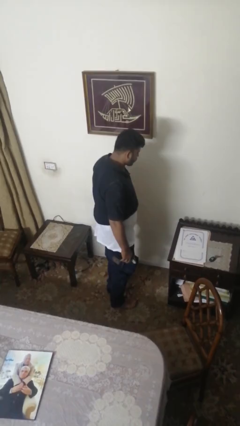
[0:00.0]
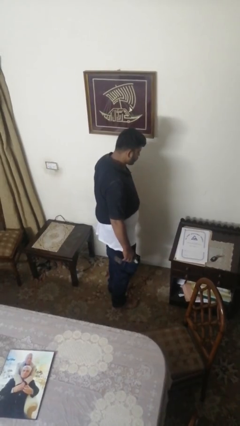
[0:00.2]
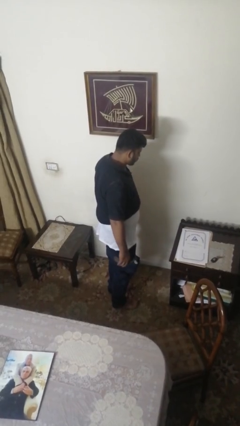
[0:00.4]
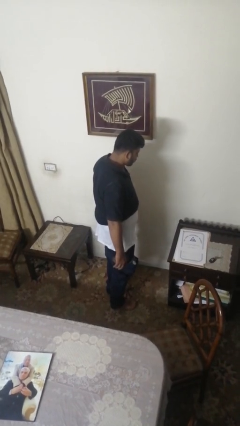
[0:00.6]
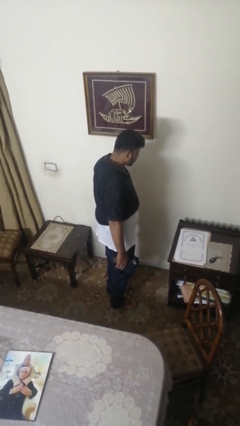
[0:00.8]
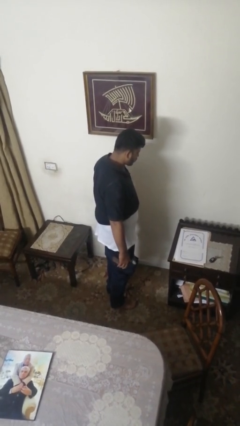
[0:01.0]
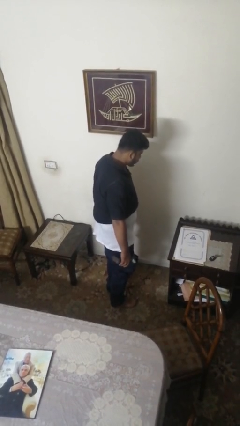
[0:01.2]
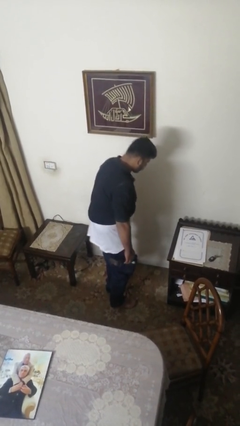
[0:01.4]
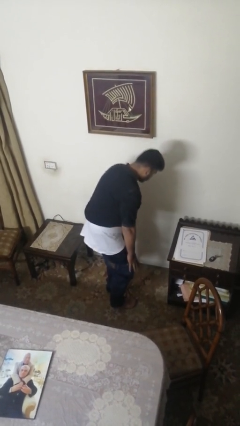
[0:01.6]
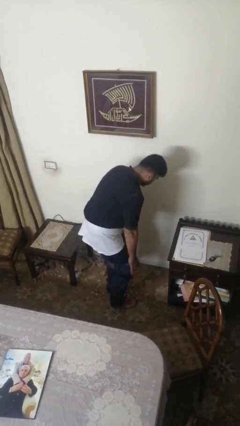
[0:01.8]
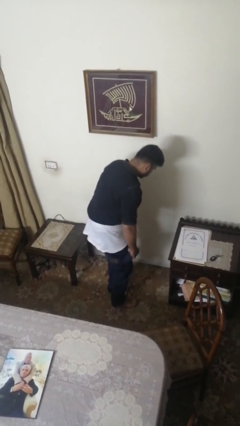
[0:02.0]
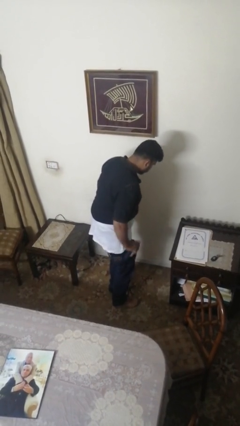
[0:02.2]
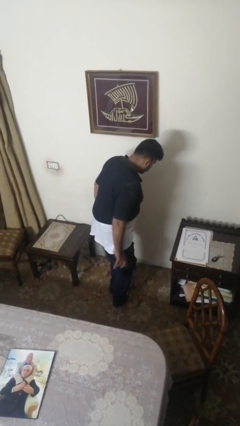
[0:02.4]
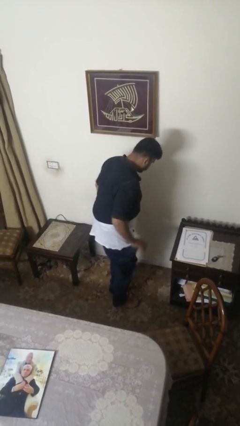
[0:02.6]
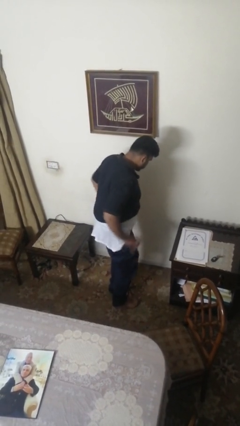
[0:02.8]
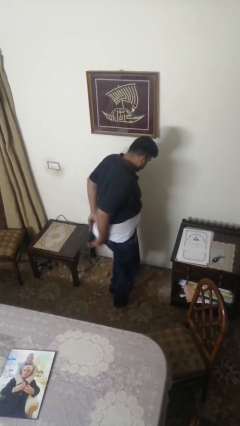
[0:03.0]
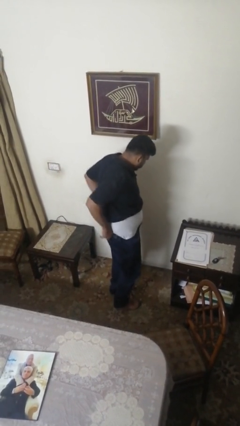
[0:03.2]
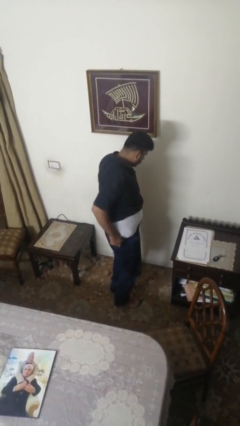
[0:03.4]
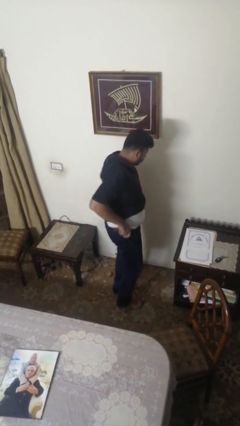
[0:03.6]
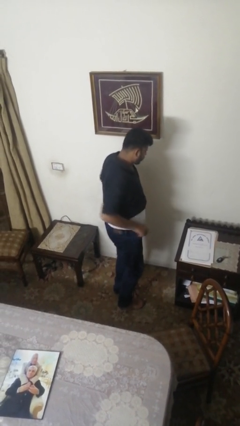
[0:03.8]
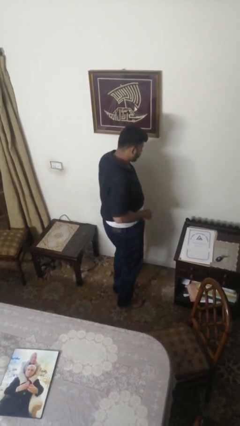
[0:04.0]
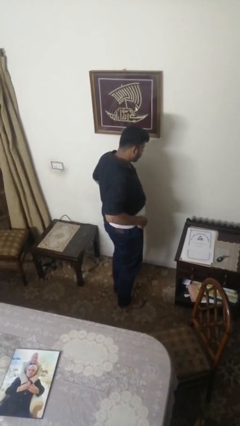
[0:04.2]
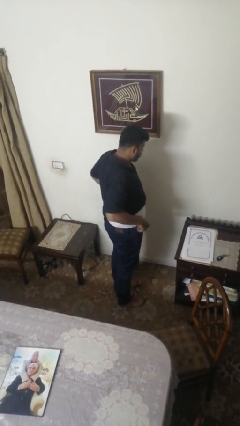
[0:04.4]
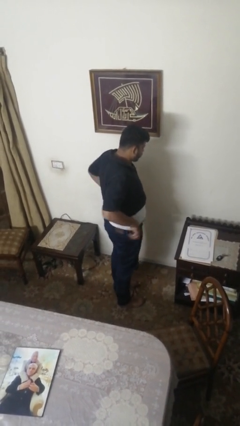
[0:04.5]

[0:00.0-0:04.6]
person puts on pants

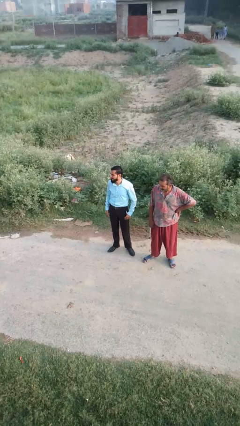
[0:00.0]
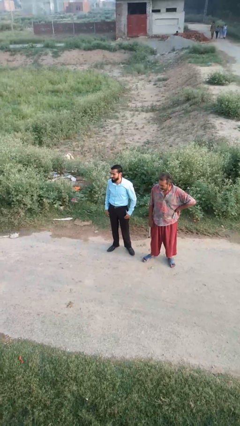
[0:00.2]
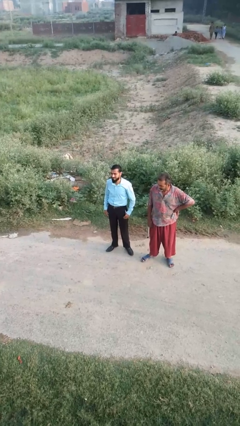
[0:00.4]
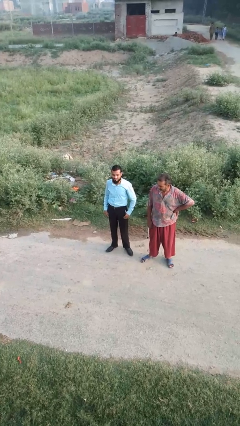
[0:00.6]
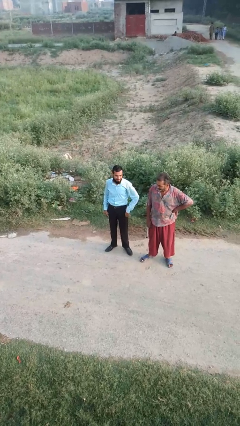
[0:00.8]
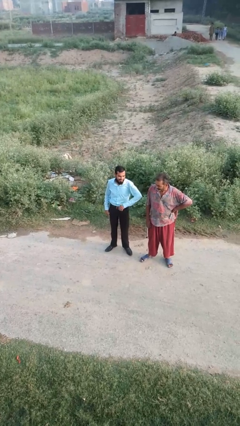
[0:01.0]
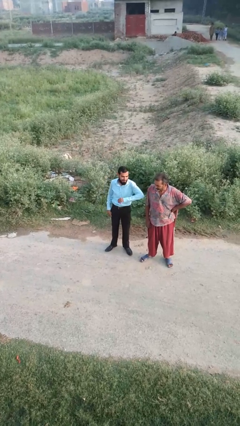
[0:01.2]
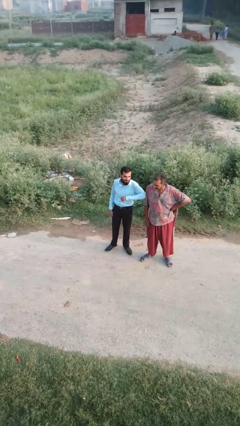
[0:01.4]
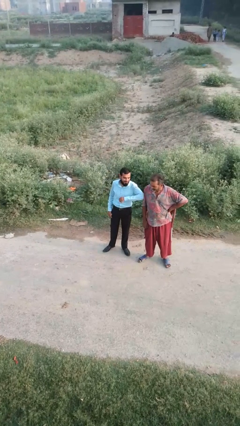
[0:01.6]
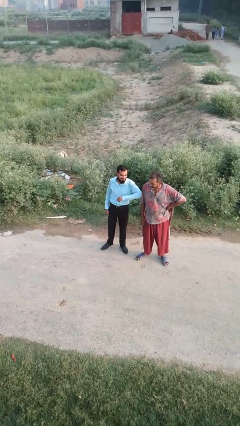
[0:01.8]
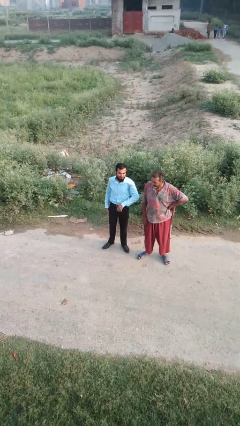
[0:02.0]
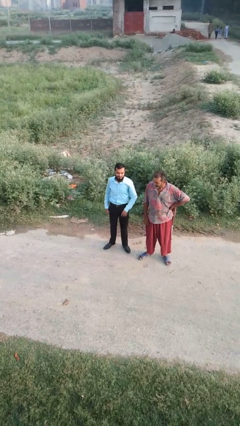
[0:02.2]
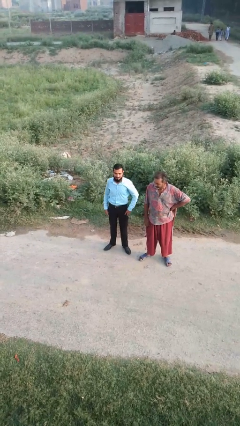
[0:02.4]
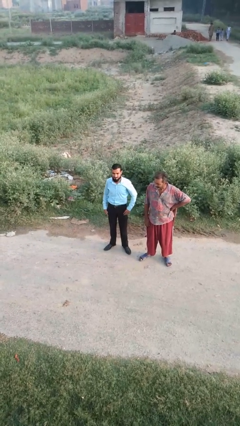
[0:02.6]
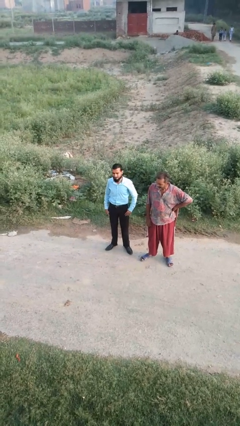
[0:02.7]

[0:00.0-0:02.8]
person nudges person with elbow

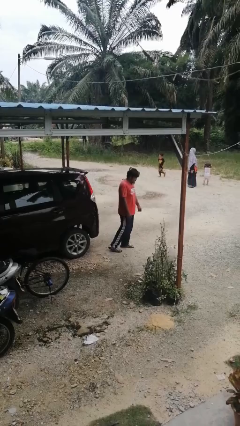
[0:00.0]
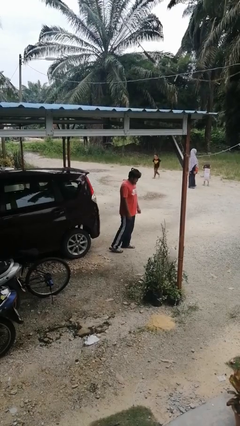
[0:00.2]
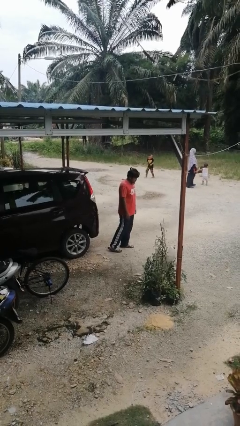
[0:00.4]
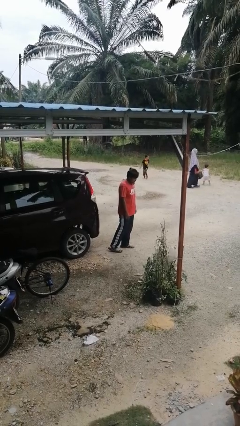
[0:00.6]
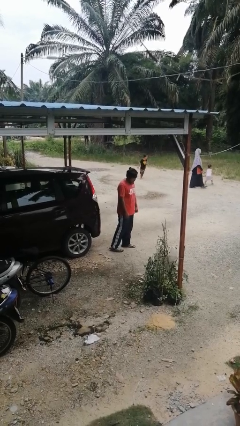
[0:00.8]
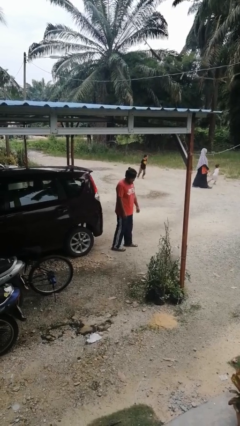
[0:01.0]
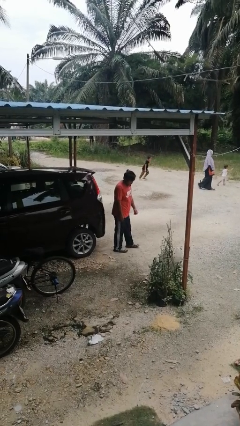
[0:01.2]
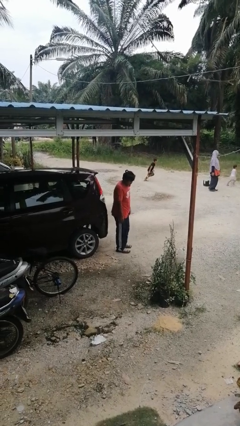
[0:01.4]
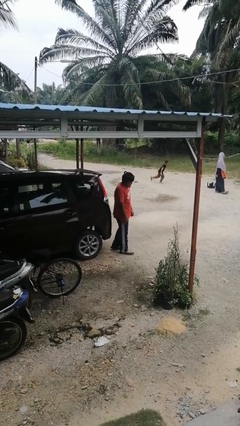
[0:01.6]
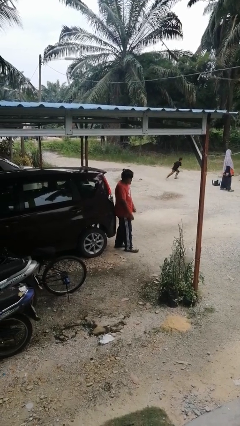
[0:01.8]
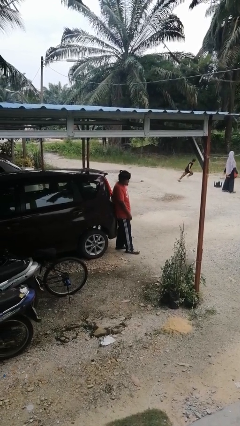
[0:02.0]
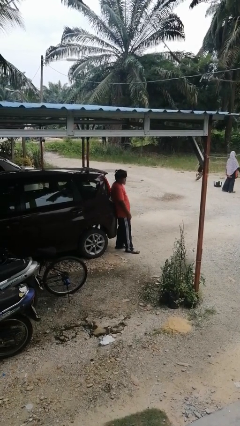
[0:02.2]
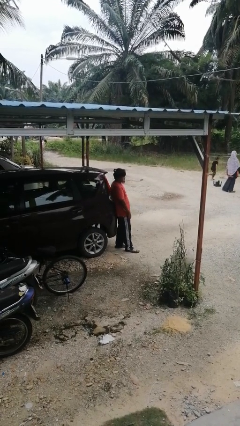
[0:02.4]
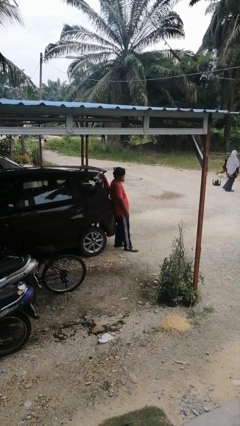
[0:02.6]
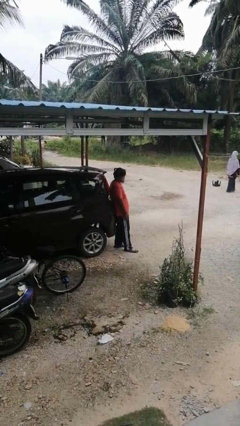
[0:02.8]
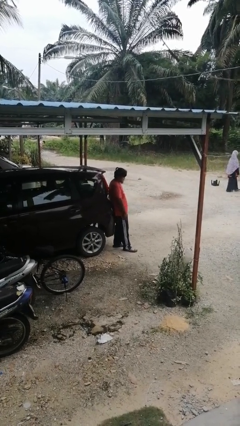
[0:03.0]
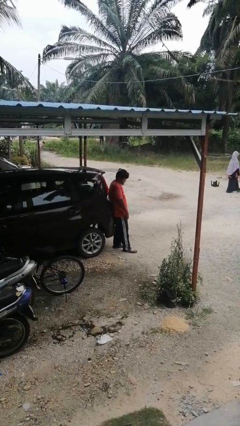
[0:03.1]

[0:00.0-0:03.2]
person leans against car

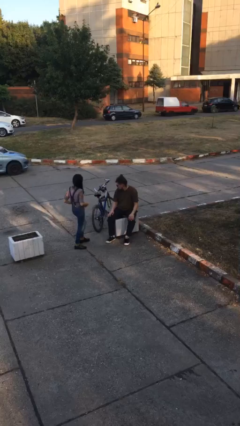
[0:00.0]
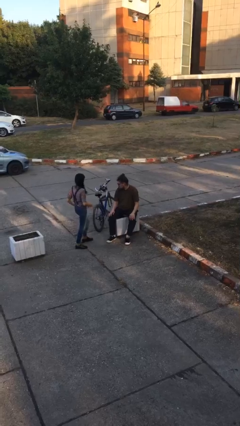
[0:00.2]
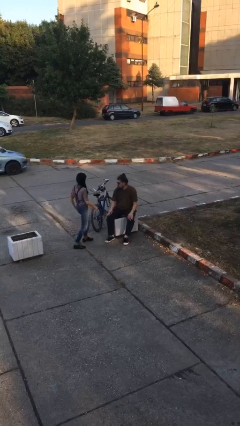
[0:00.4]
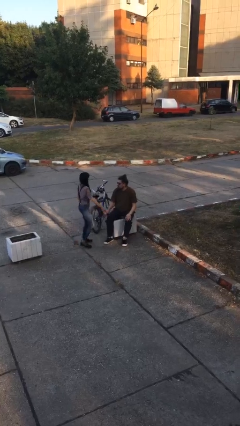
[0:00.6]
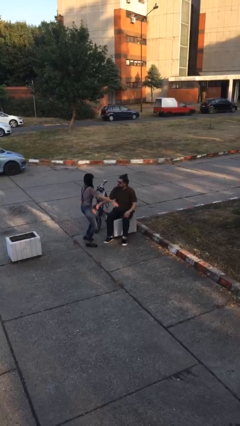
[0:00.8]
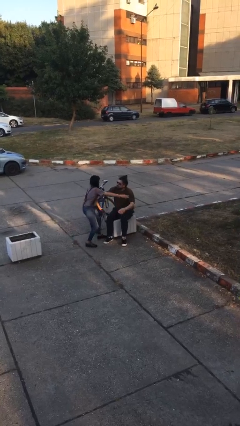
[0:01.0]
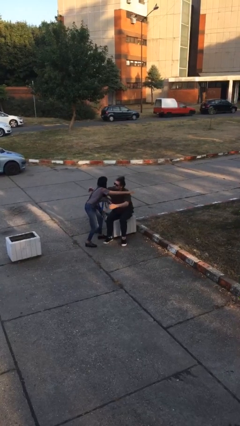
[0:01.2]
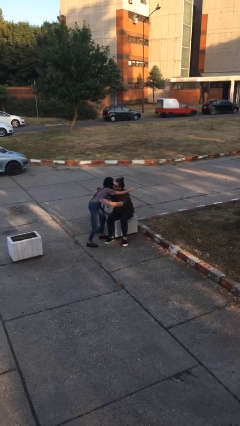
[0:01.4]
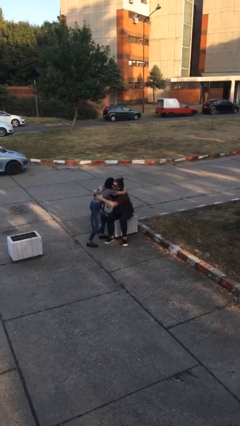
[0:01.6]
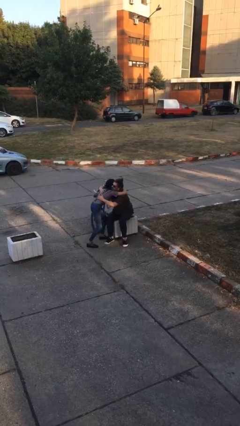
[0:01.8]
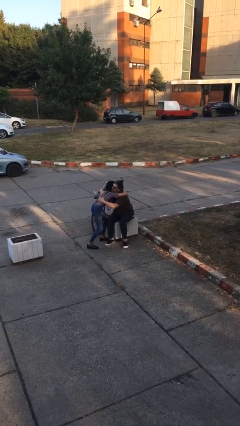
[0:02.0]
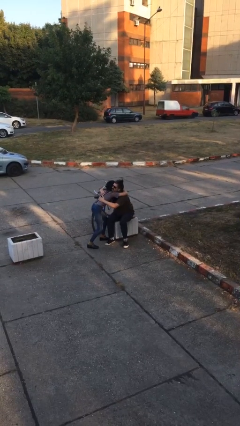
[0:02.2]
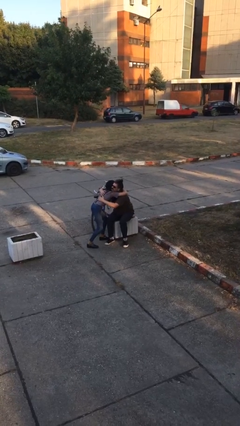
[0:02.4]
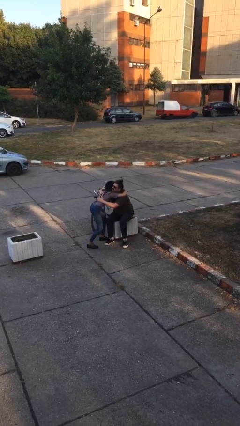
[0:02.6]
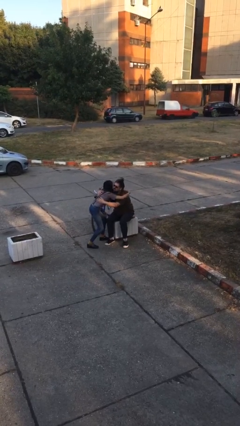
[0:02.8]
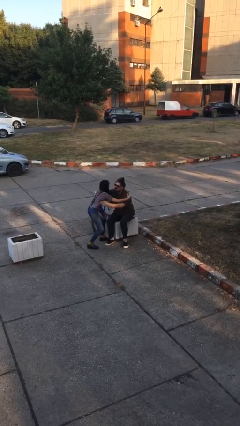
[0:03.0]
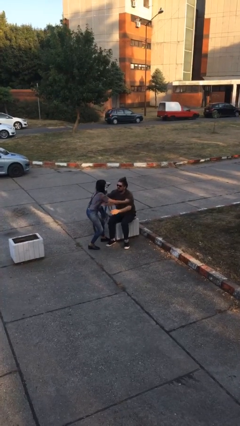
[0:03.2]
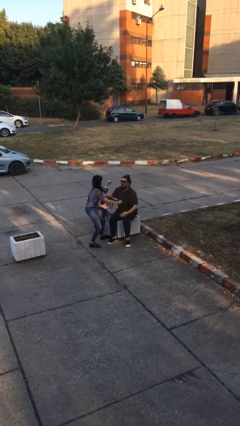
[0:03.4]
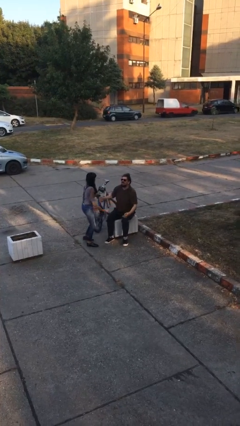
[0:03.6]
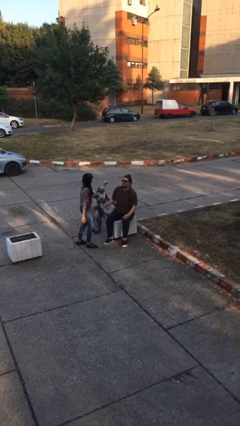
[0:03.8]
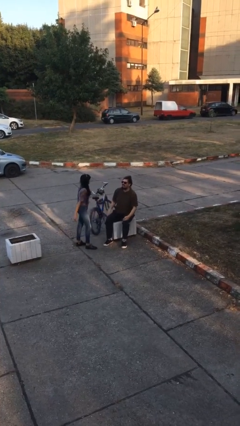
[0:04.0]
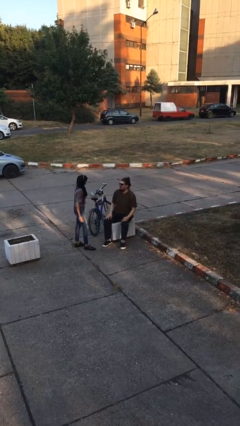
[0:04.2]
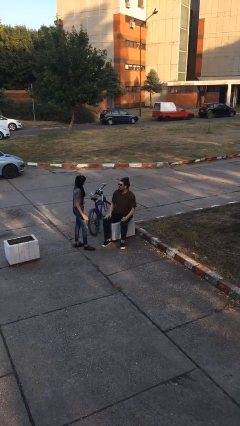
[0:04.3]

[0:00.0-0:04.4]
person embraces person

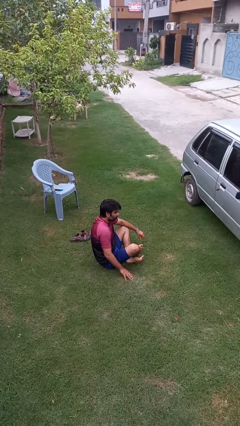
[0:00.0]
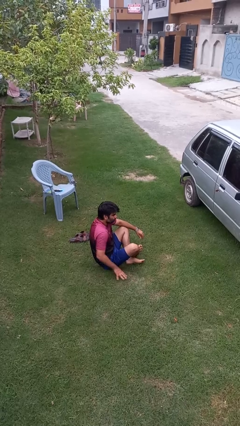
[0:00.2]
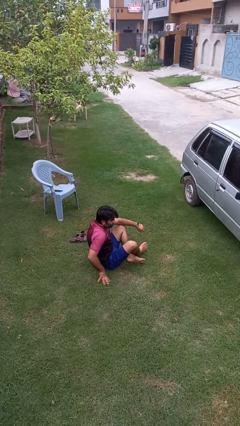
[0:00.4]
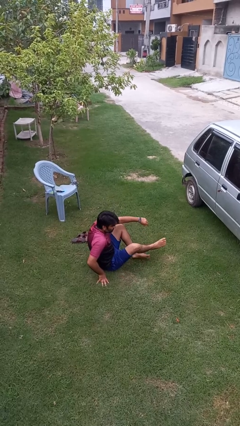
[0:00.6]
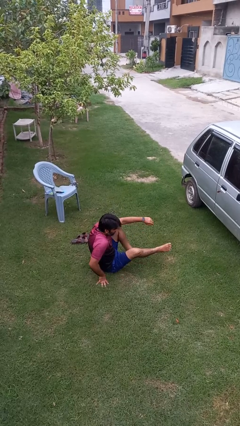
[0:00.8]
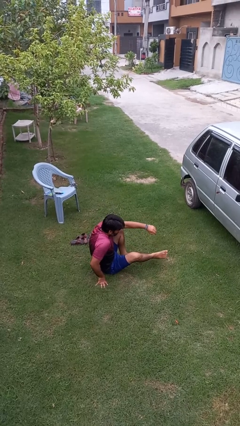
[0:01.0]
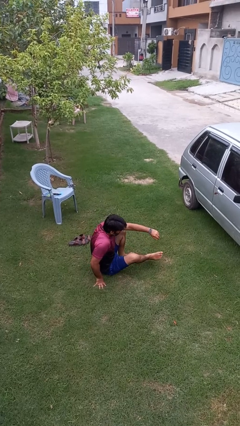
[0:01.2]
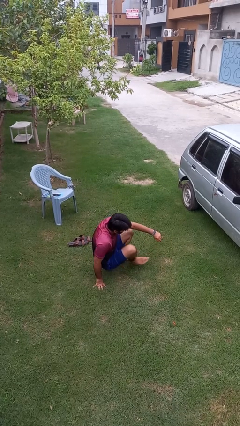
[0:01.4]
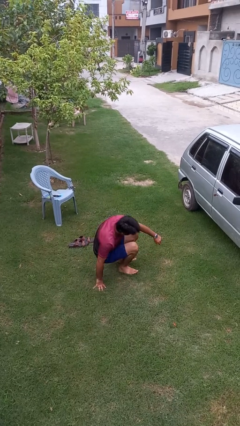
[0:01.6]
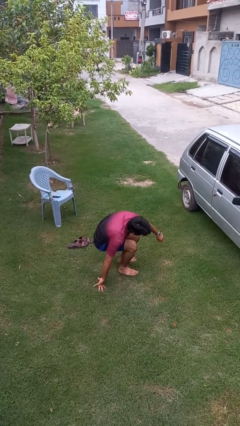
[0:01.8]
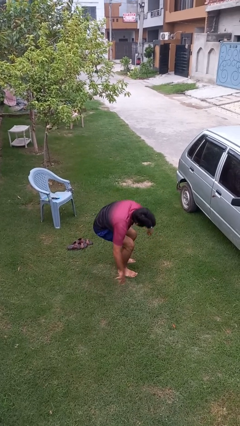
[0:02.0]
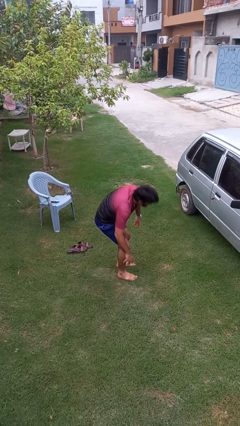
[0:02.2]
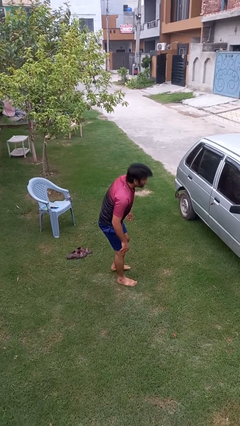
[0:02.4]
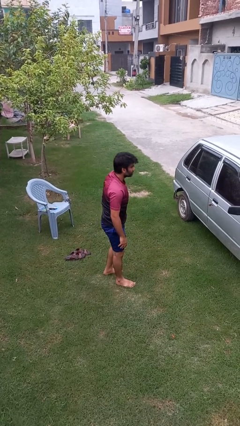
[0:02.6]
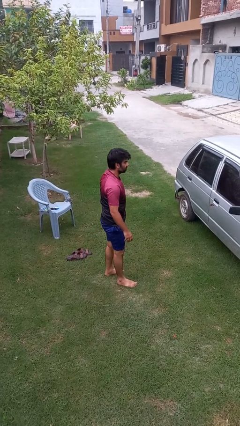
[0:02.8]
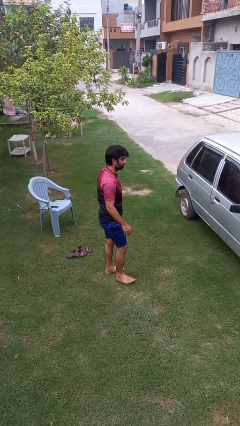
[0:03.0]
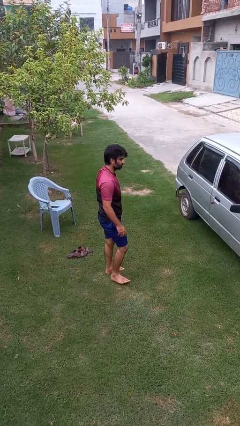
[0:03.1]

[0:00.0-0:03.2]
person stands up from floor
